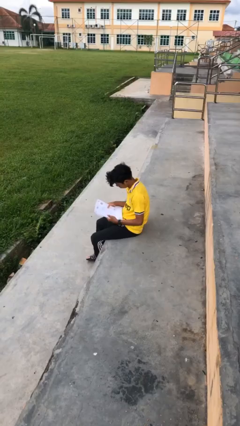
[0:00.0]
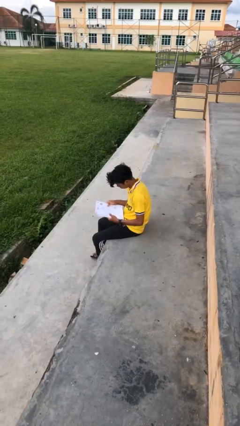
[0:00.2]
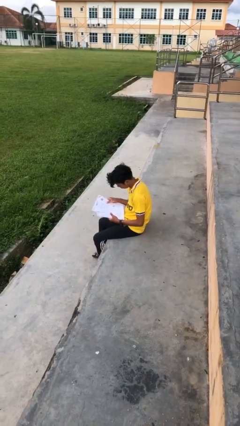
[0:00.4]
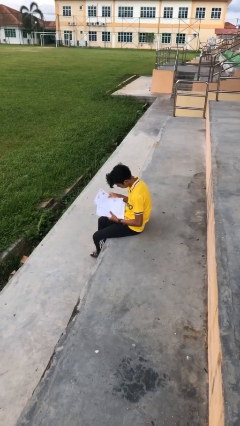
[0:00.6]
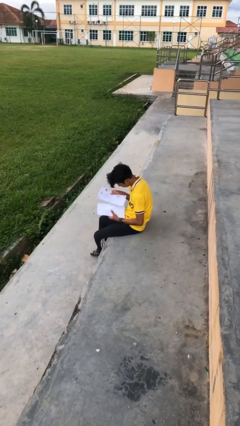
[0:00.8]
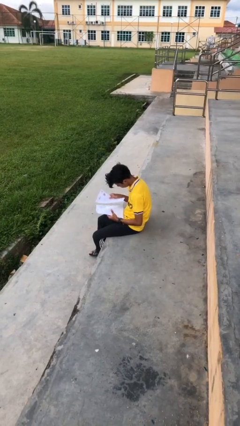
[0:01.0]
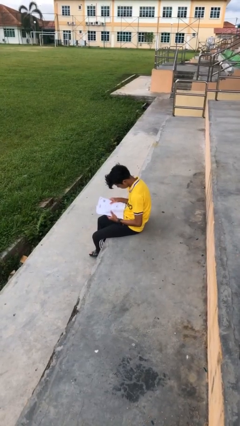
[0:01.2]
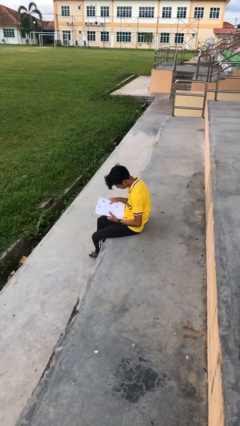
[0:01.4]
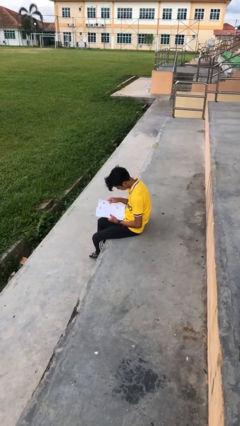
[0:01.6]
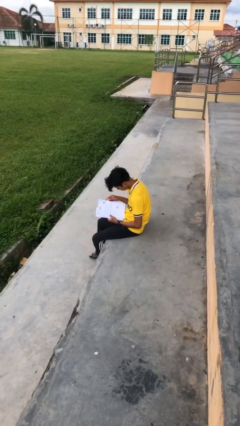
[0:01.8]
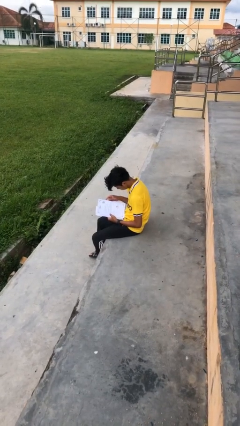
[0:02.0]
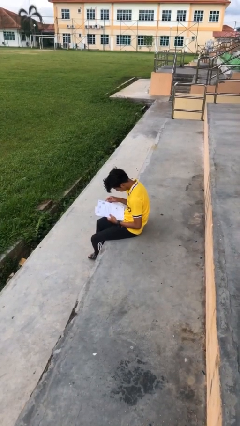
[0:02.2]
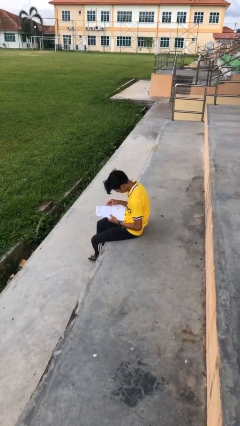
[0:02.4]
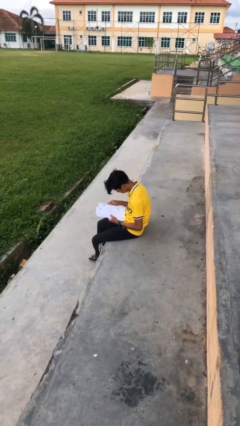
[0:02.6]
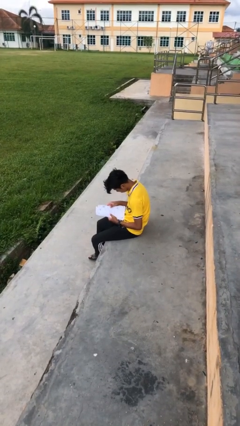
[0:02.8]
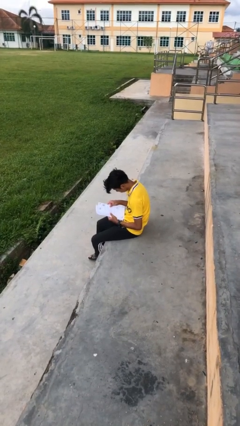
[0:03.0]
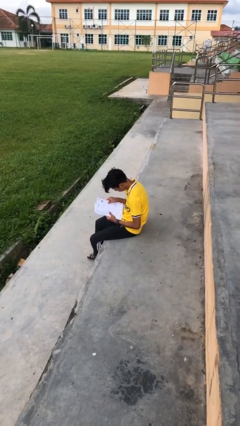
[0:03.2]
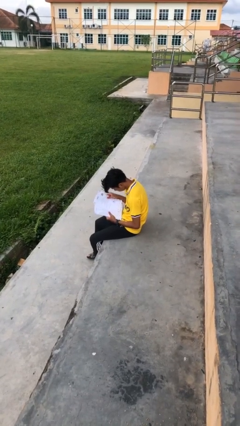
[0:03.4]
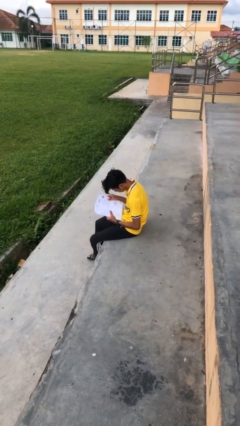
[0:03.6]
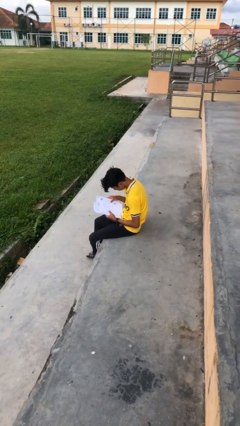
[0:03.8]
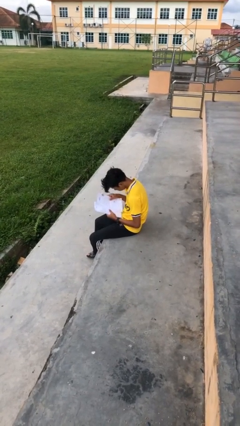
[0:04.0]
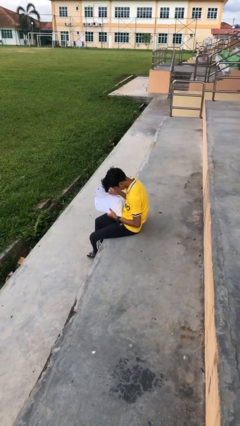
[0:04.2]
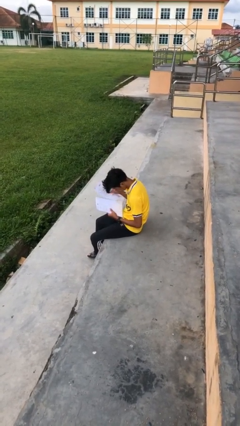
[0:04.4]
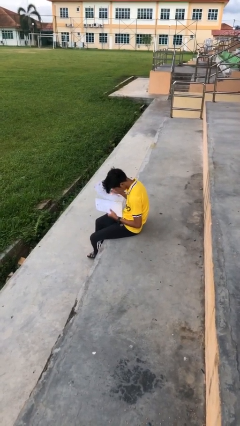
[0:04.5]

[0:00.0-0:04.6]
person reads document

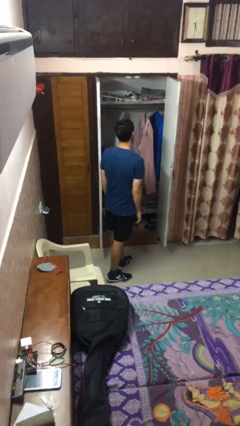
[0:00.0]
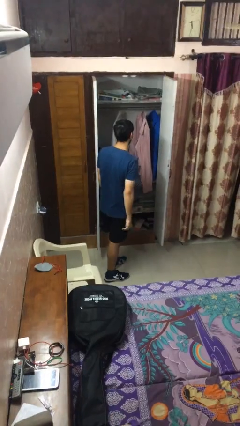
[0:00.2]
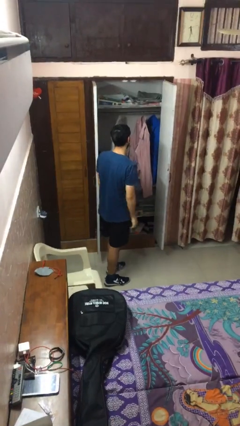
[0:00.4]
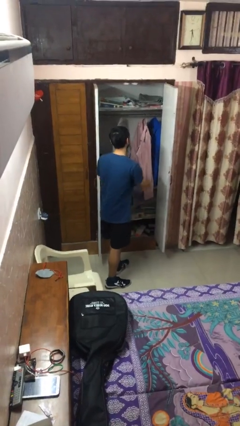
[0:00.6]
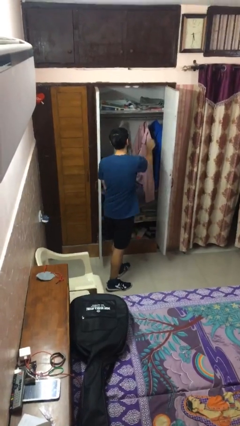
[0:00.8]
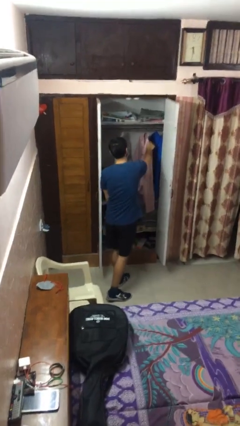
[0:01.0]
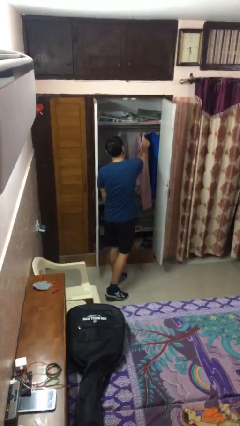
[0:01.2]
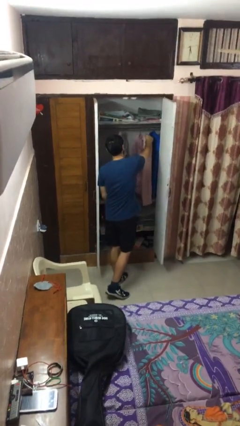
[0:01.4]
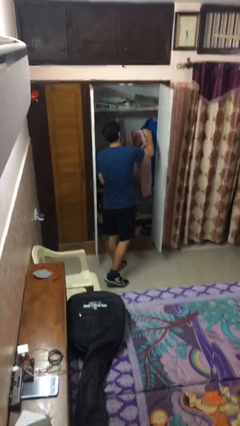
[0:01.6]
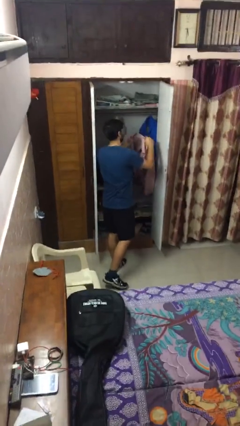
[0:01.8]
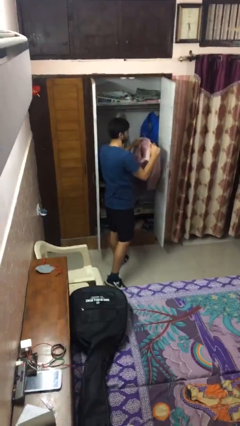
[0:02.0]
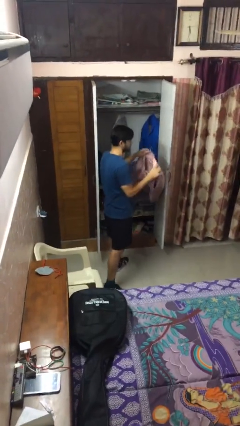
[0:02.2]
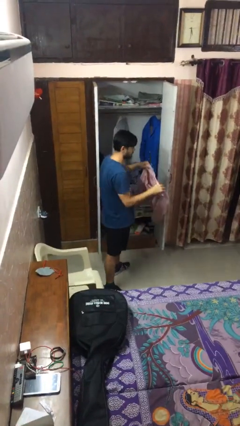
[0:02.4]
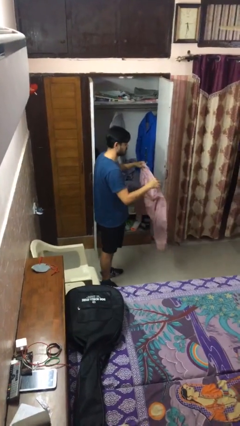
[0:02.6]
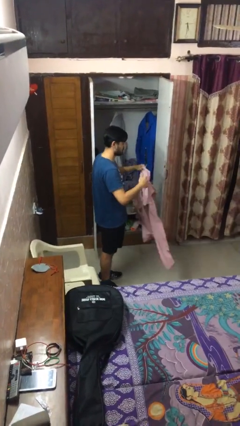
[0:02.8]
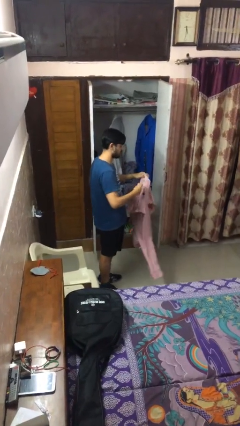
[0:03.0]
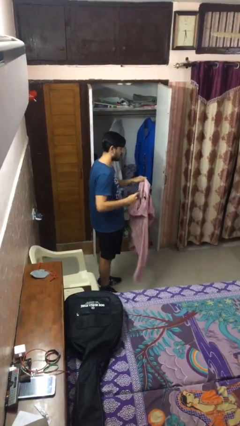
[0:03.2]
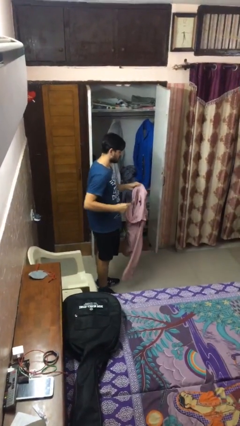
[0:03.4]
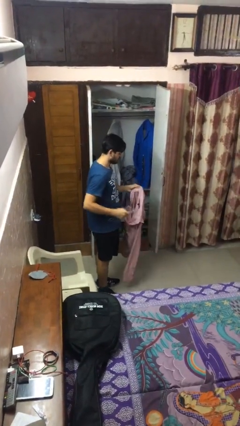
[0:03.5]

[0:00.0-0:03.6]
person takes clothes from closet

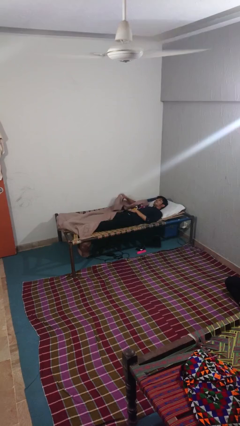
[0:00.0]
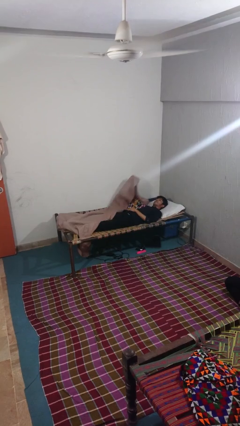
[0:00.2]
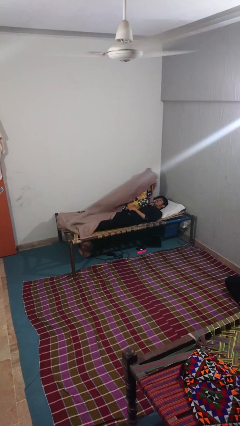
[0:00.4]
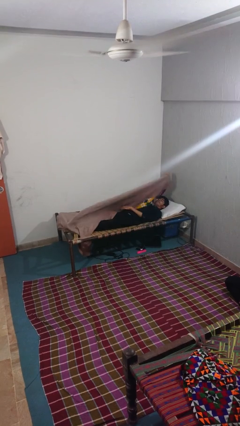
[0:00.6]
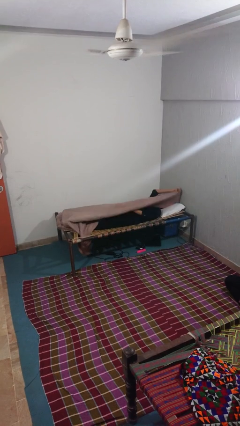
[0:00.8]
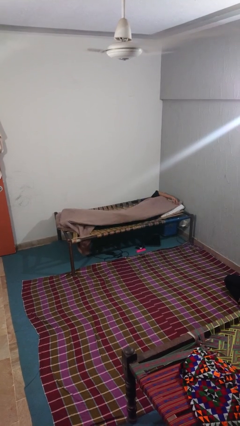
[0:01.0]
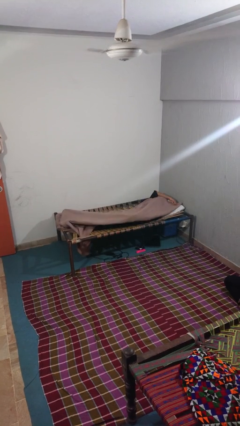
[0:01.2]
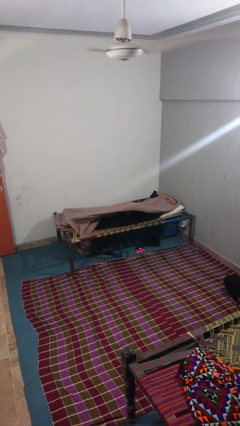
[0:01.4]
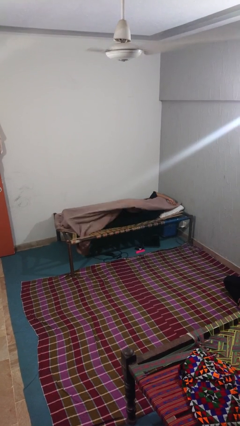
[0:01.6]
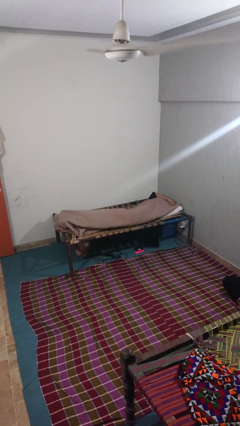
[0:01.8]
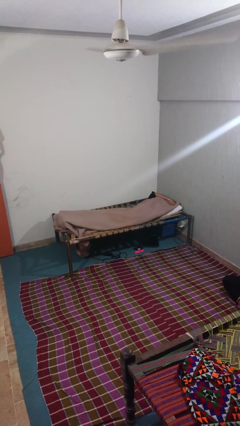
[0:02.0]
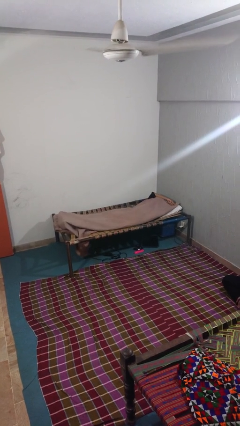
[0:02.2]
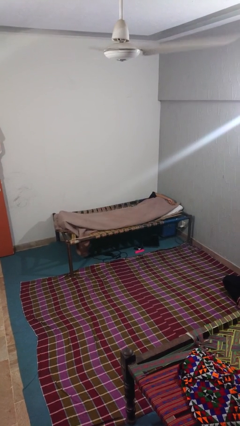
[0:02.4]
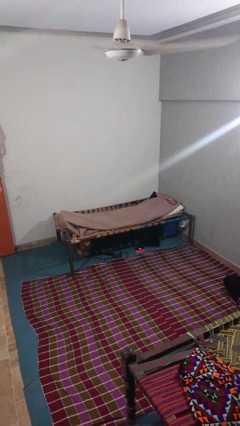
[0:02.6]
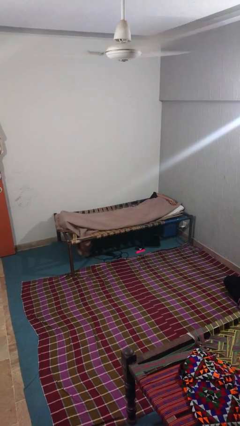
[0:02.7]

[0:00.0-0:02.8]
person covers with blanket

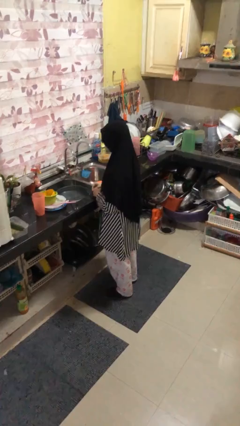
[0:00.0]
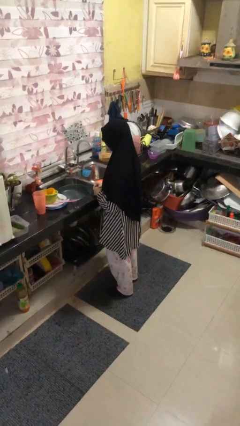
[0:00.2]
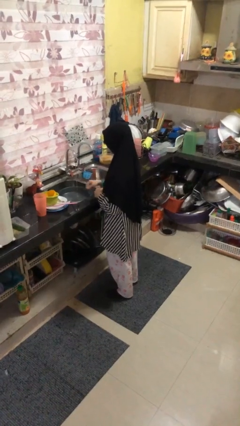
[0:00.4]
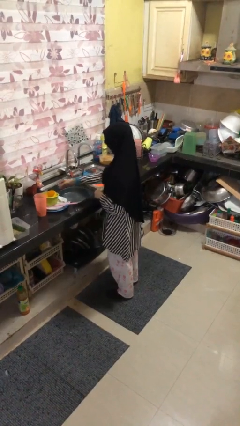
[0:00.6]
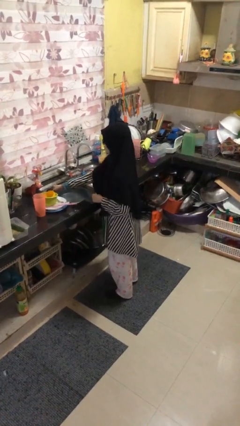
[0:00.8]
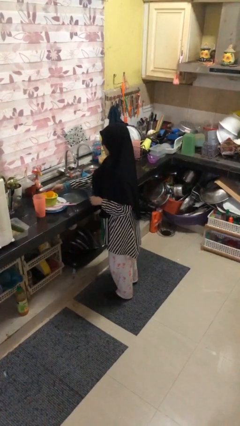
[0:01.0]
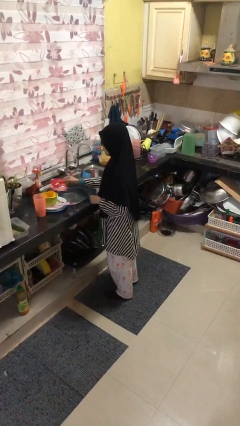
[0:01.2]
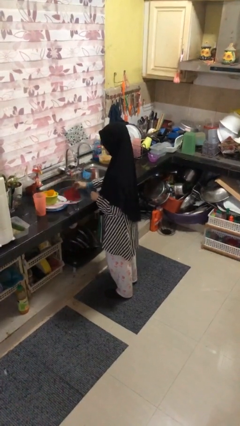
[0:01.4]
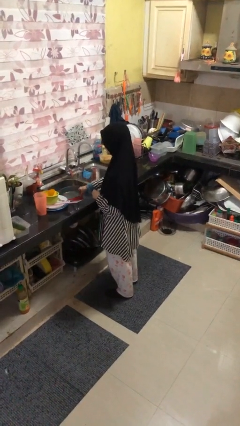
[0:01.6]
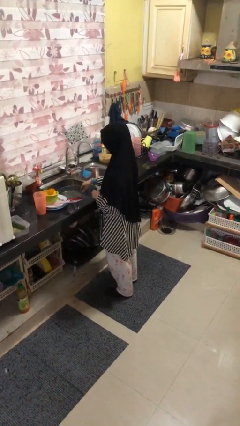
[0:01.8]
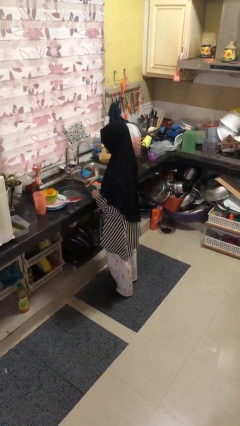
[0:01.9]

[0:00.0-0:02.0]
person loads dishwasher

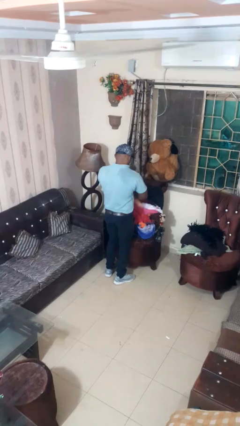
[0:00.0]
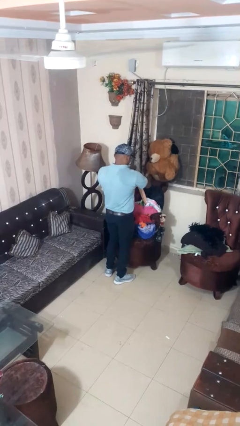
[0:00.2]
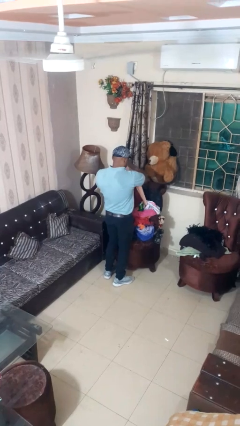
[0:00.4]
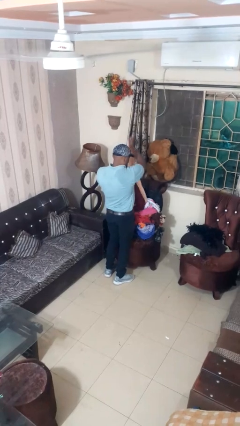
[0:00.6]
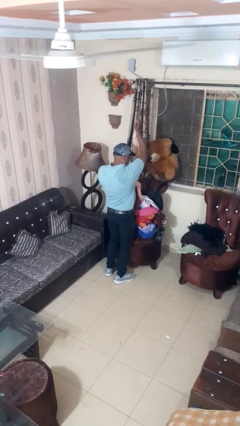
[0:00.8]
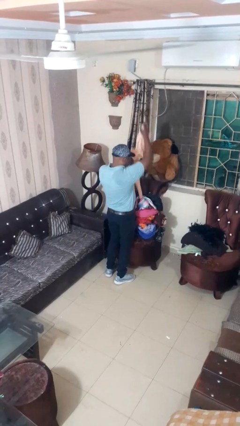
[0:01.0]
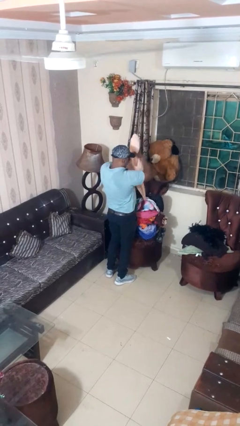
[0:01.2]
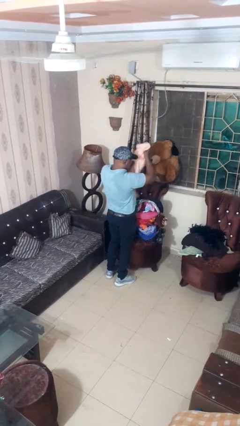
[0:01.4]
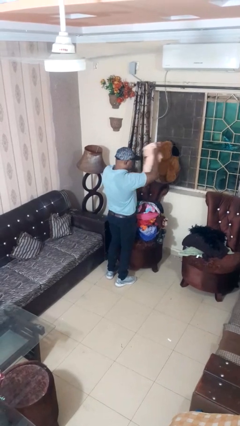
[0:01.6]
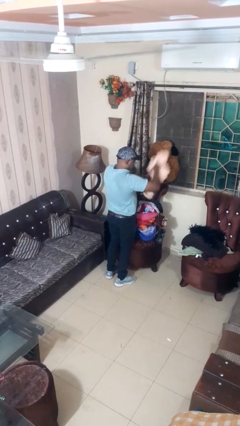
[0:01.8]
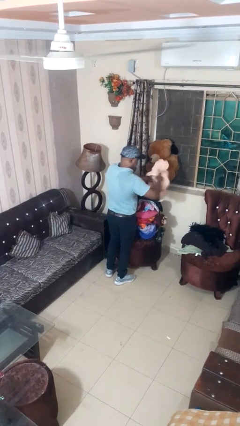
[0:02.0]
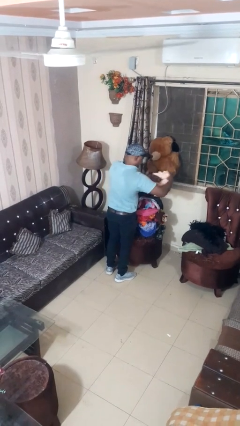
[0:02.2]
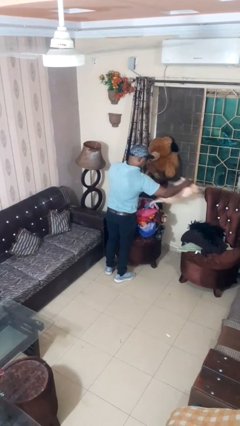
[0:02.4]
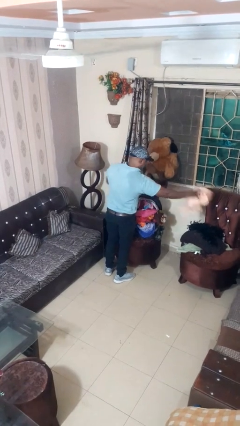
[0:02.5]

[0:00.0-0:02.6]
person unloads clothes from suitcase

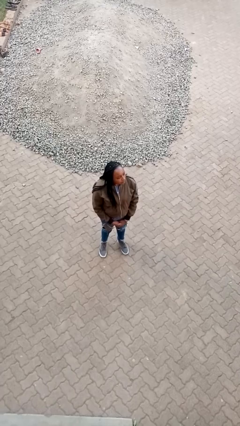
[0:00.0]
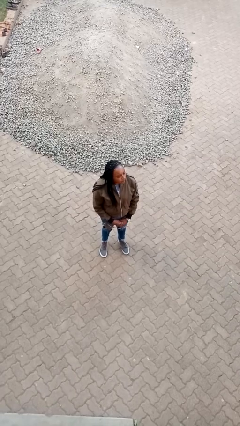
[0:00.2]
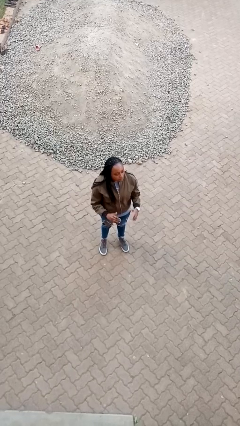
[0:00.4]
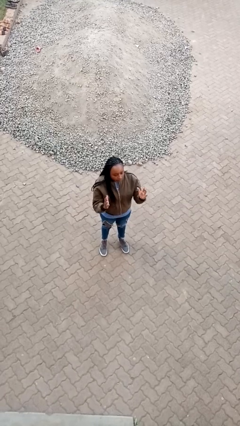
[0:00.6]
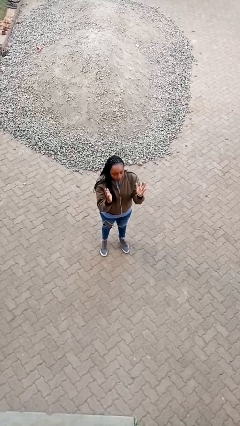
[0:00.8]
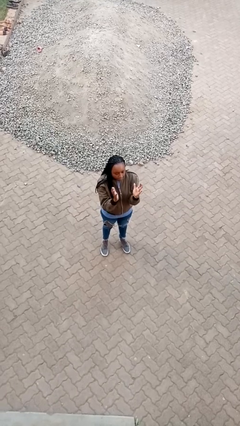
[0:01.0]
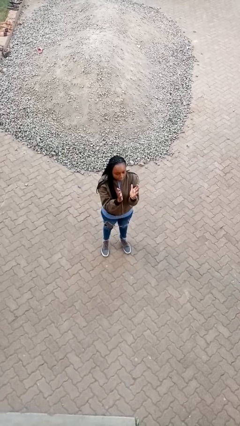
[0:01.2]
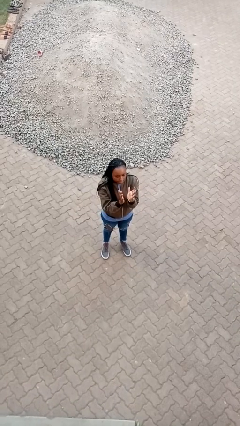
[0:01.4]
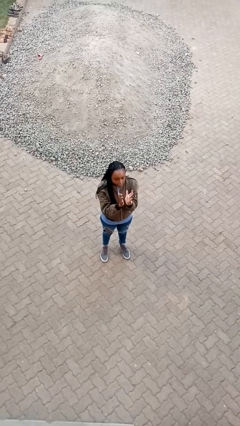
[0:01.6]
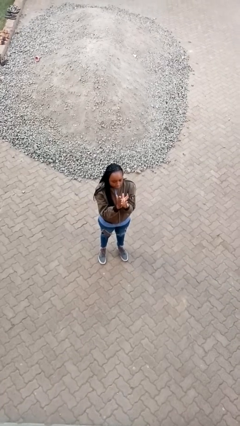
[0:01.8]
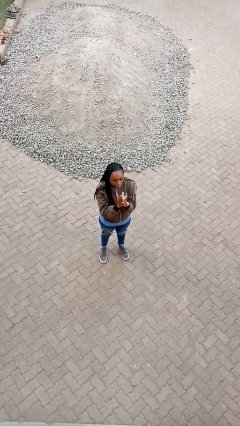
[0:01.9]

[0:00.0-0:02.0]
person gestures zoom in
